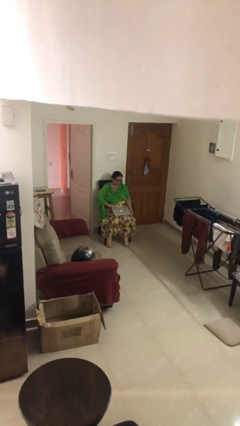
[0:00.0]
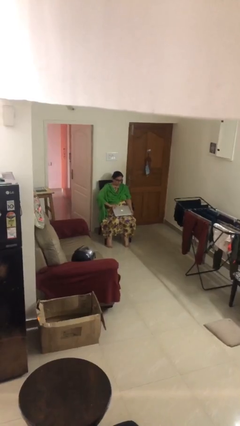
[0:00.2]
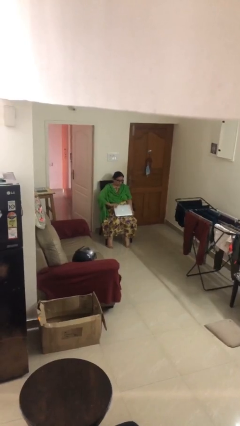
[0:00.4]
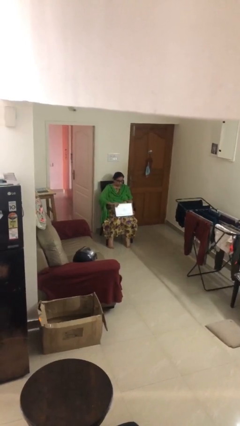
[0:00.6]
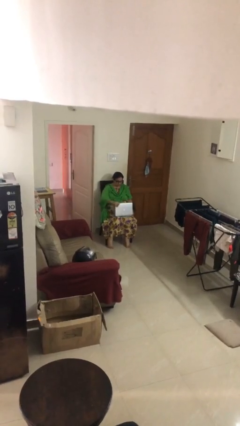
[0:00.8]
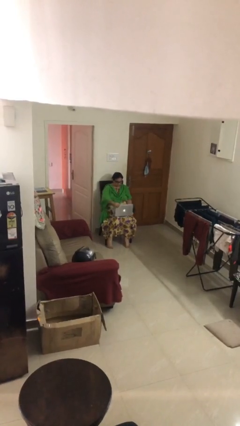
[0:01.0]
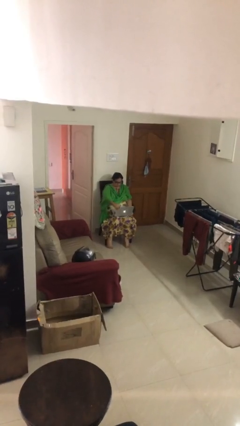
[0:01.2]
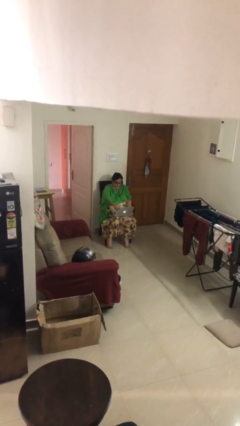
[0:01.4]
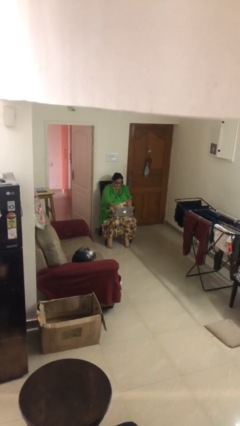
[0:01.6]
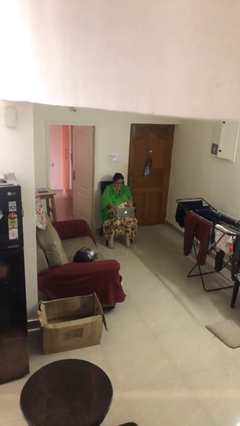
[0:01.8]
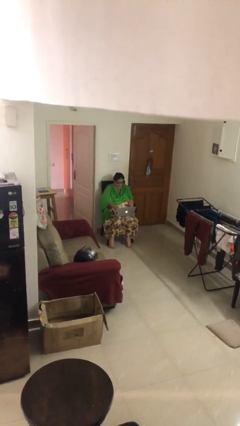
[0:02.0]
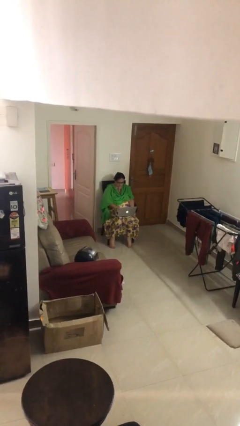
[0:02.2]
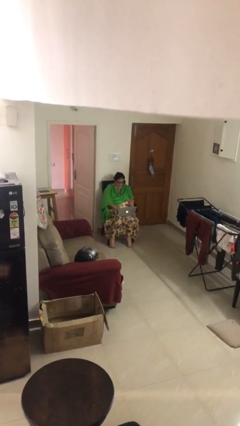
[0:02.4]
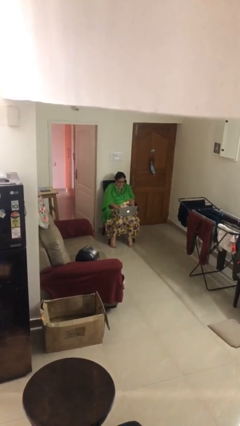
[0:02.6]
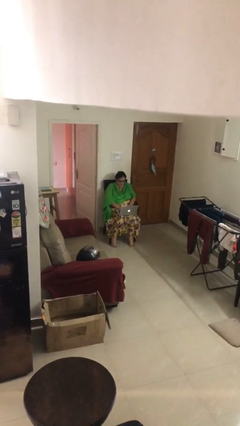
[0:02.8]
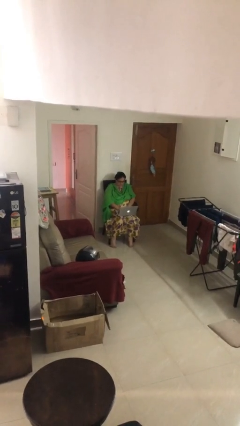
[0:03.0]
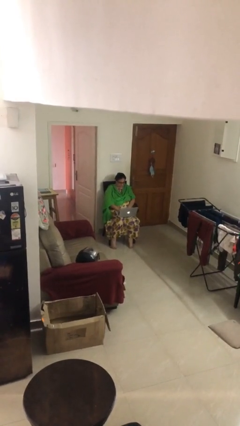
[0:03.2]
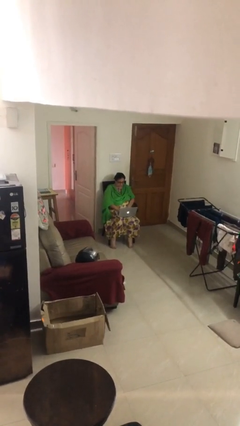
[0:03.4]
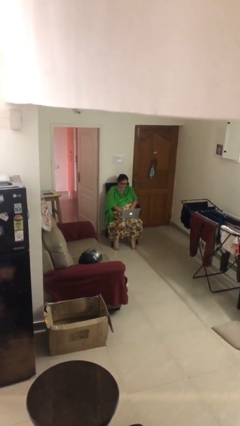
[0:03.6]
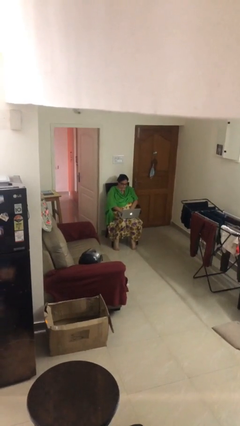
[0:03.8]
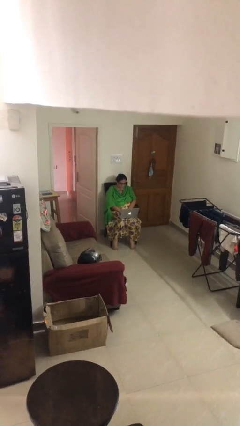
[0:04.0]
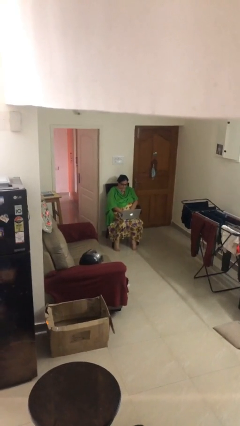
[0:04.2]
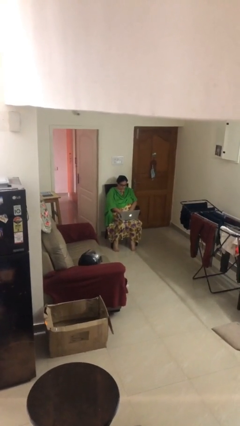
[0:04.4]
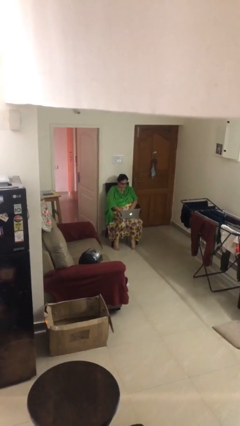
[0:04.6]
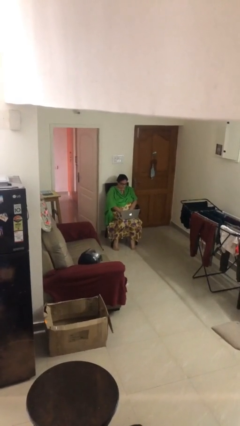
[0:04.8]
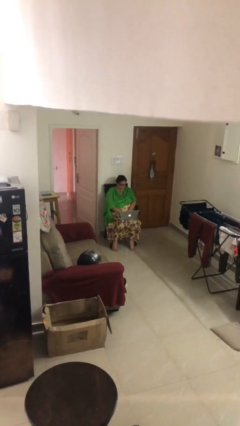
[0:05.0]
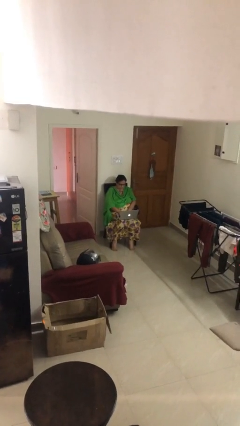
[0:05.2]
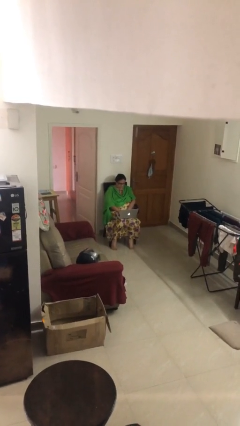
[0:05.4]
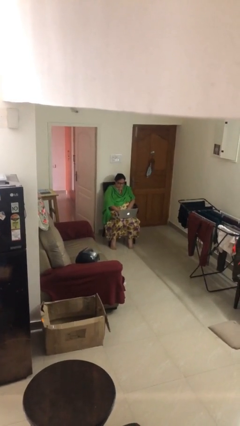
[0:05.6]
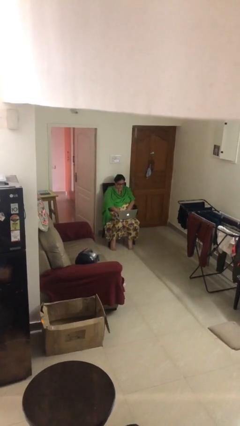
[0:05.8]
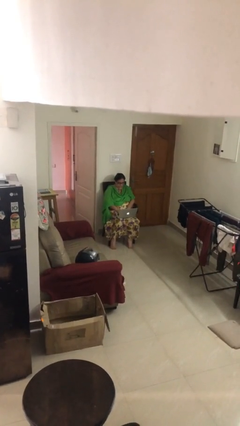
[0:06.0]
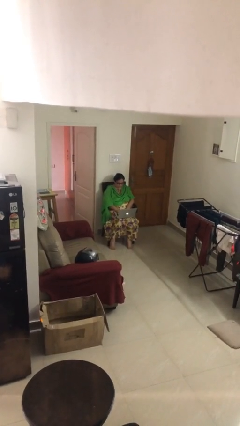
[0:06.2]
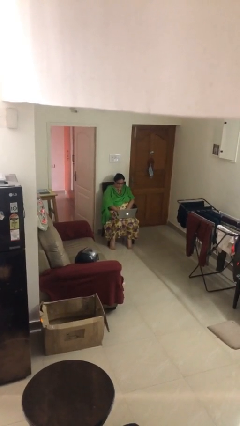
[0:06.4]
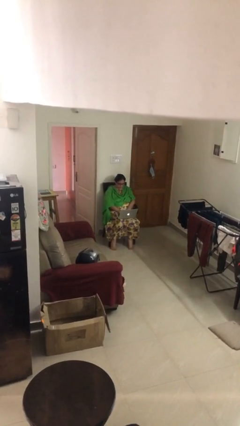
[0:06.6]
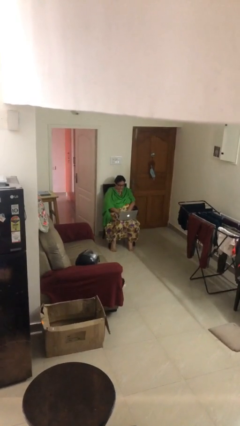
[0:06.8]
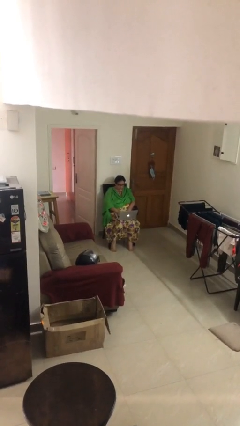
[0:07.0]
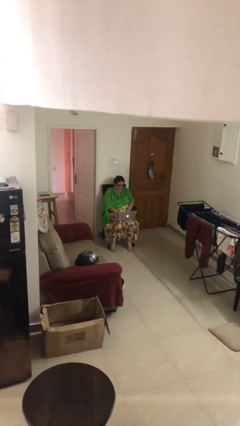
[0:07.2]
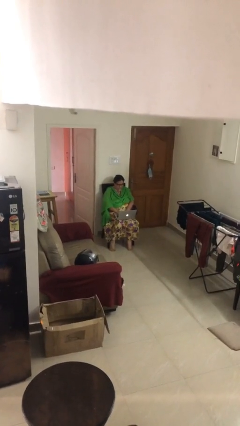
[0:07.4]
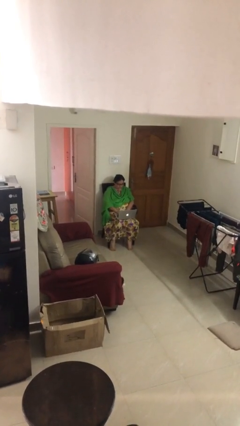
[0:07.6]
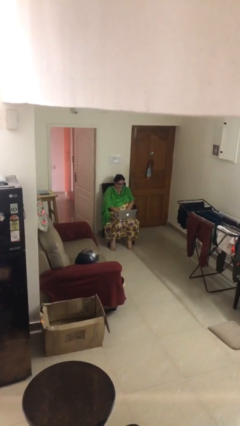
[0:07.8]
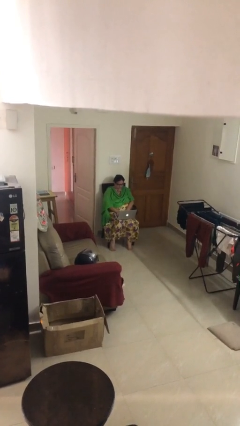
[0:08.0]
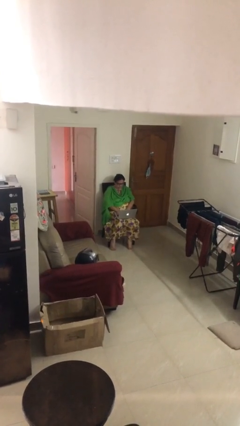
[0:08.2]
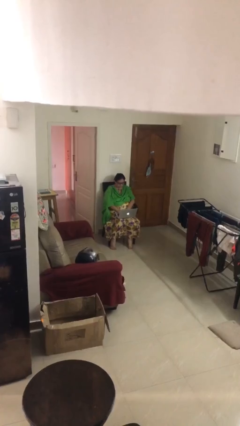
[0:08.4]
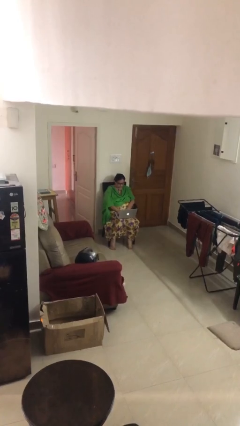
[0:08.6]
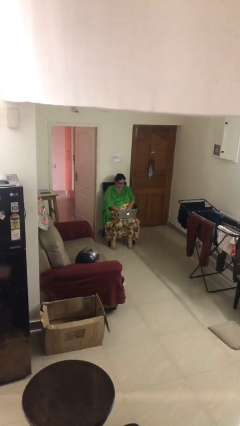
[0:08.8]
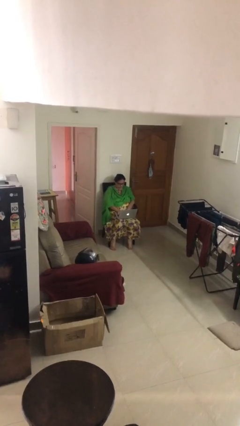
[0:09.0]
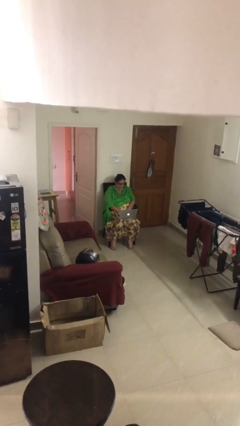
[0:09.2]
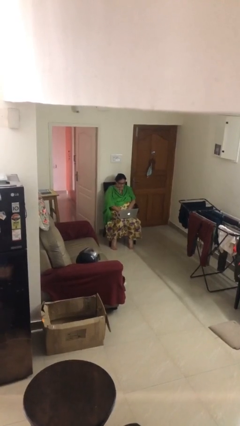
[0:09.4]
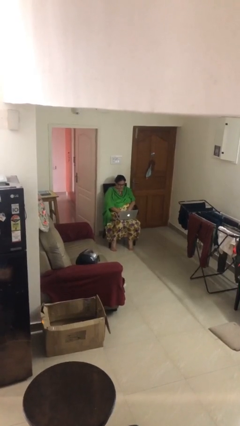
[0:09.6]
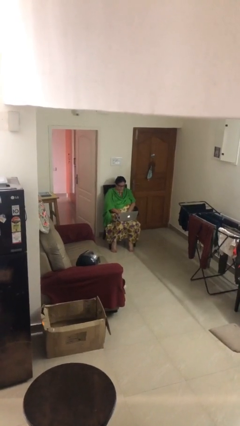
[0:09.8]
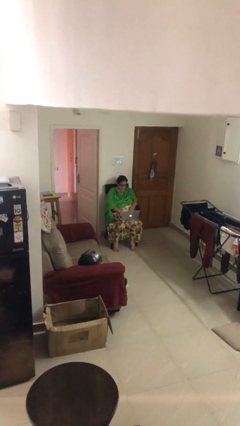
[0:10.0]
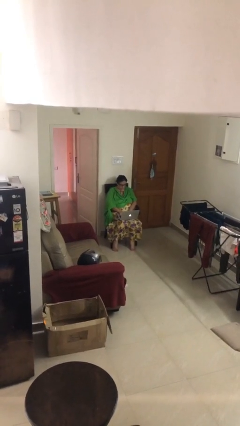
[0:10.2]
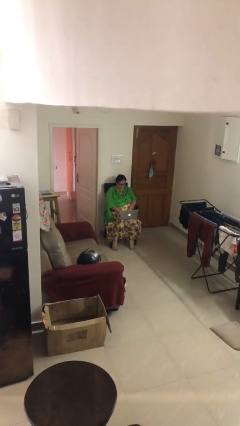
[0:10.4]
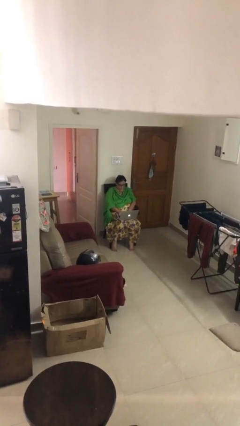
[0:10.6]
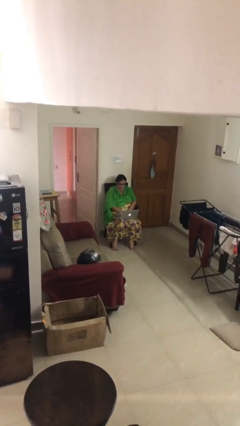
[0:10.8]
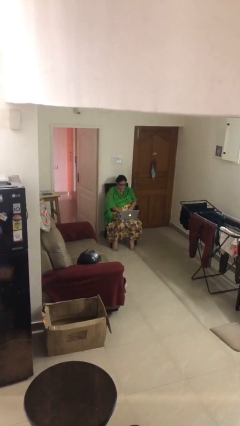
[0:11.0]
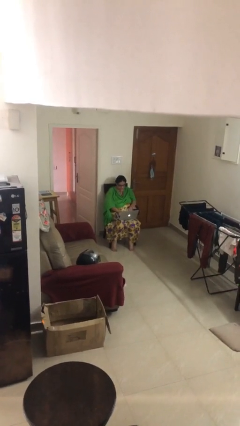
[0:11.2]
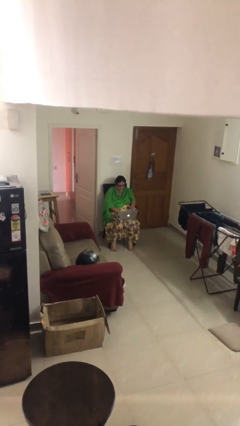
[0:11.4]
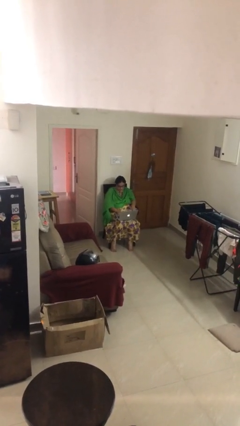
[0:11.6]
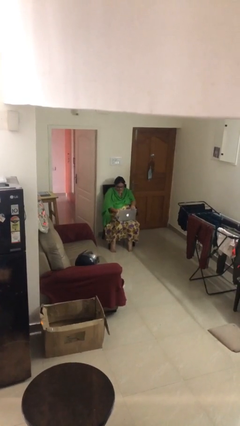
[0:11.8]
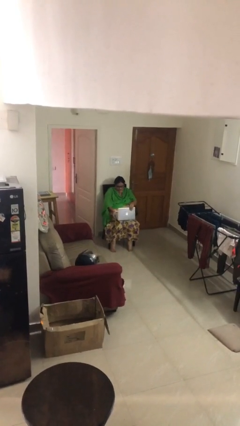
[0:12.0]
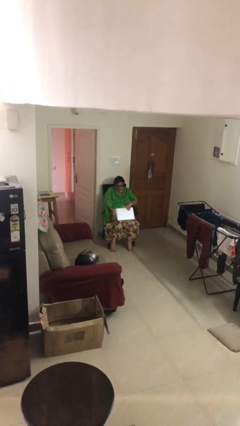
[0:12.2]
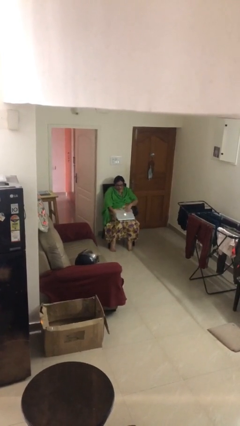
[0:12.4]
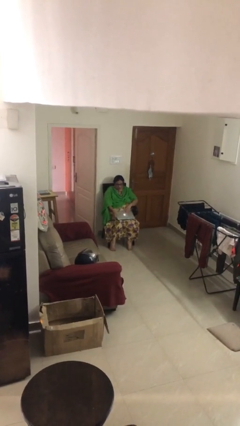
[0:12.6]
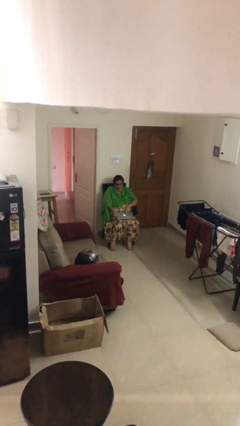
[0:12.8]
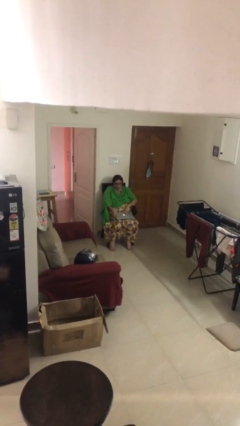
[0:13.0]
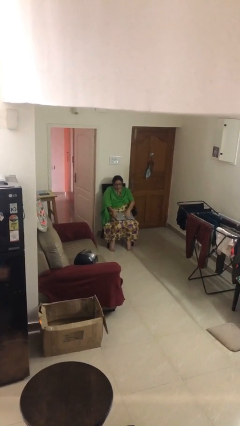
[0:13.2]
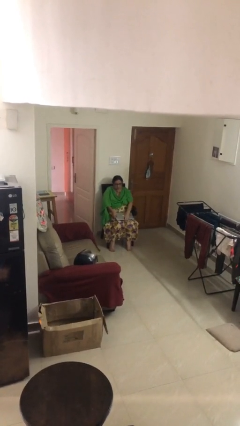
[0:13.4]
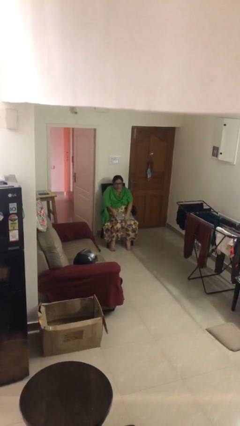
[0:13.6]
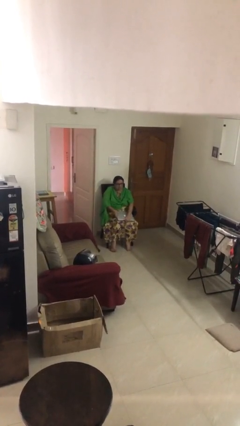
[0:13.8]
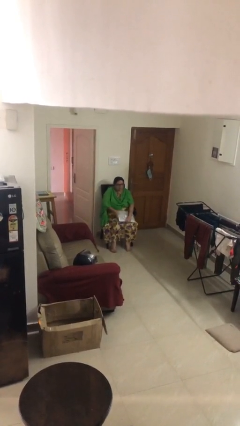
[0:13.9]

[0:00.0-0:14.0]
person interacts with laptop

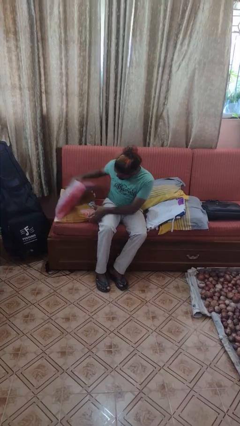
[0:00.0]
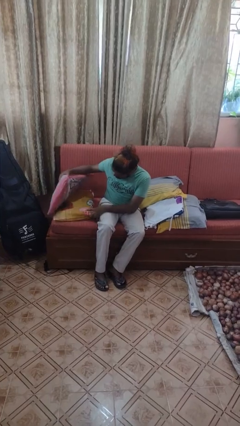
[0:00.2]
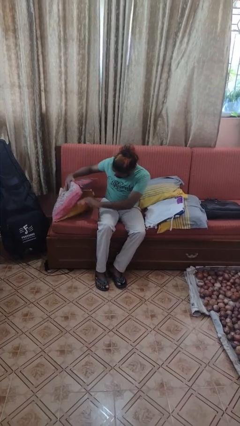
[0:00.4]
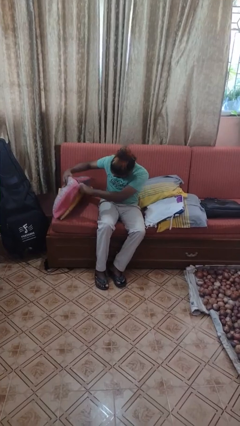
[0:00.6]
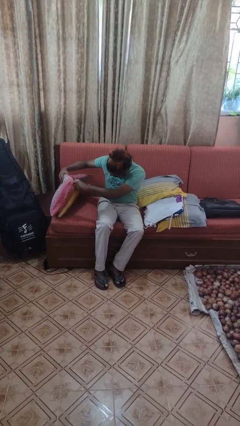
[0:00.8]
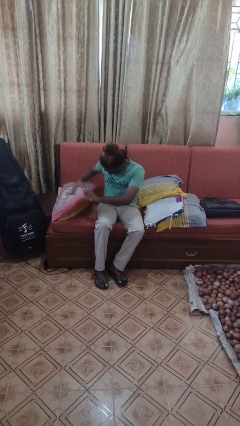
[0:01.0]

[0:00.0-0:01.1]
person searches in couch

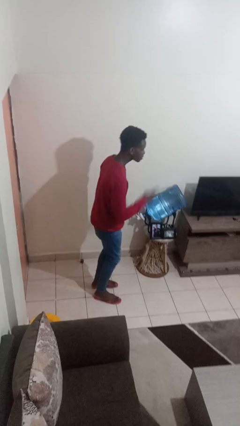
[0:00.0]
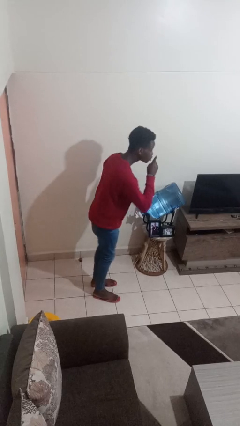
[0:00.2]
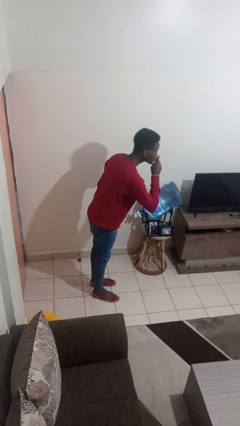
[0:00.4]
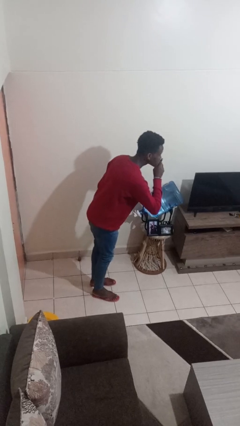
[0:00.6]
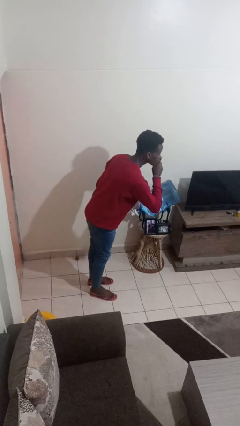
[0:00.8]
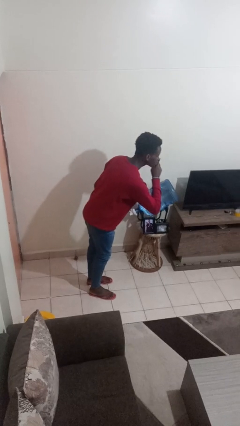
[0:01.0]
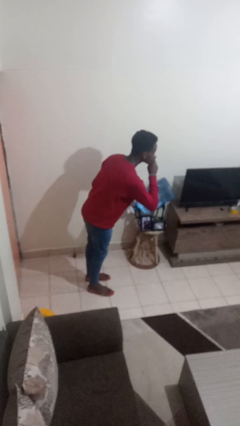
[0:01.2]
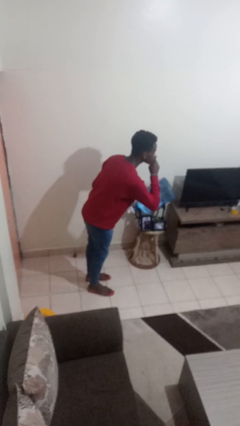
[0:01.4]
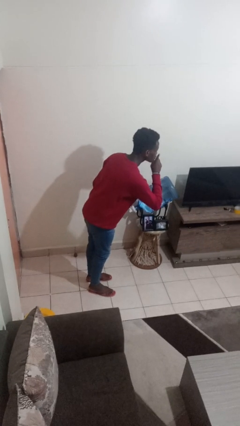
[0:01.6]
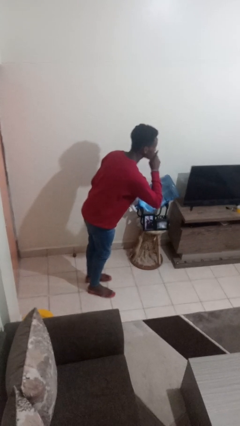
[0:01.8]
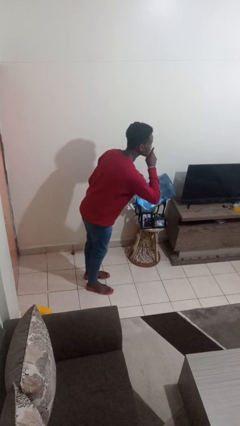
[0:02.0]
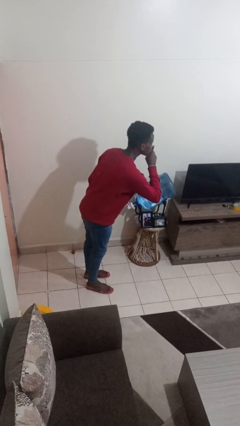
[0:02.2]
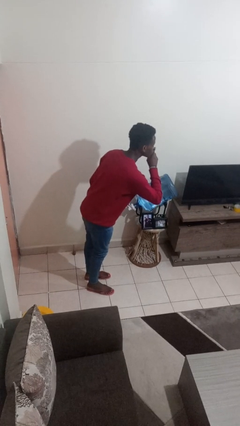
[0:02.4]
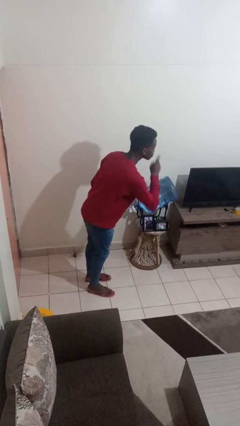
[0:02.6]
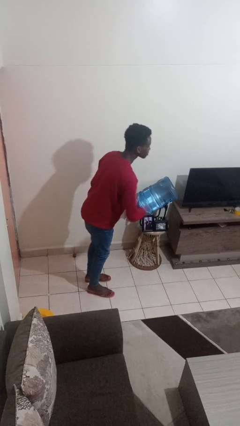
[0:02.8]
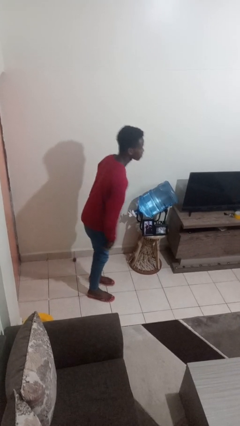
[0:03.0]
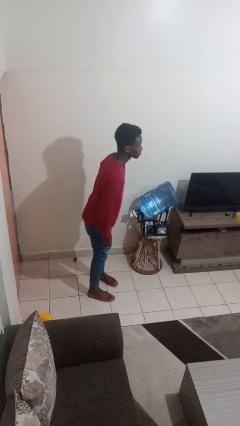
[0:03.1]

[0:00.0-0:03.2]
person gestures be quiet
